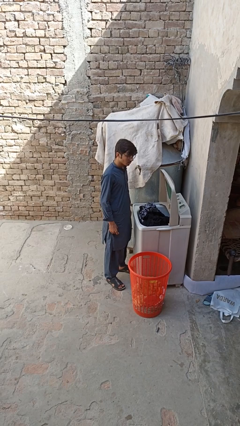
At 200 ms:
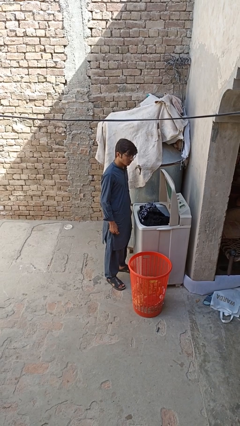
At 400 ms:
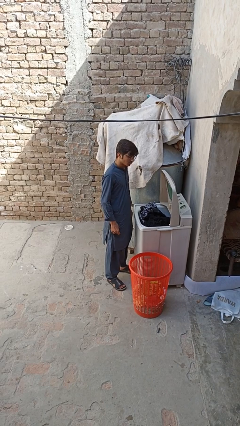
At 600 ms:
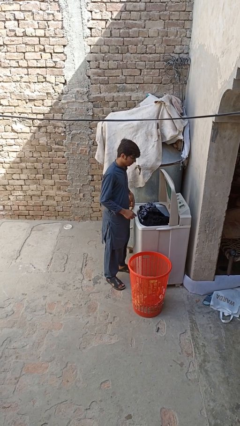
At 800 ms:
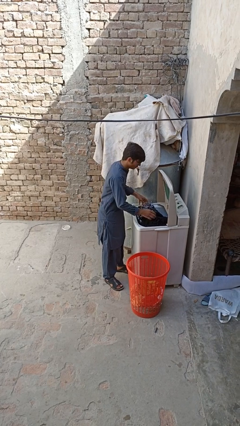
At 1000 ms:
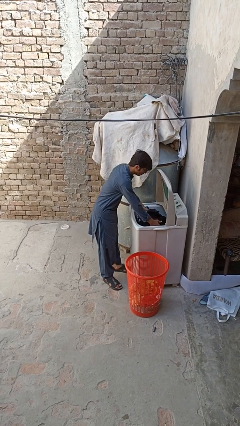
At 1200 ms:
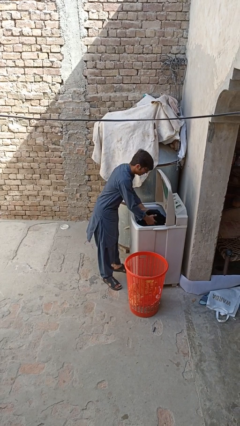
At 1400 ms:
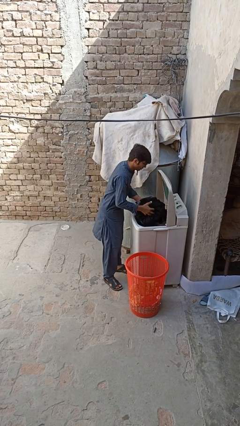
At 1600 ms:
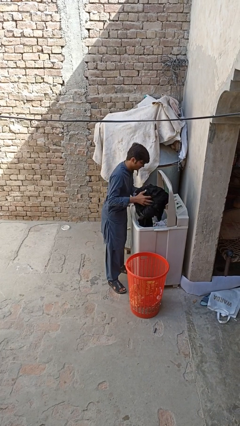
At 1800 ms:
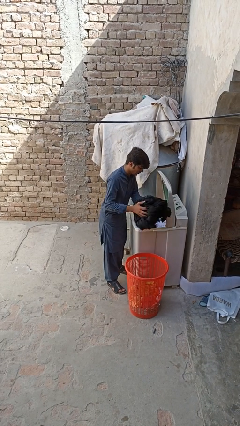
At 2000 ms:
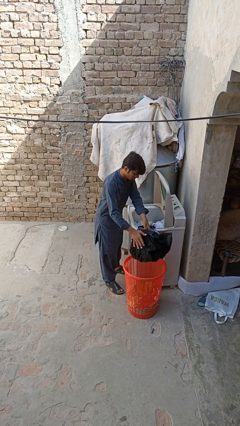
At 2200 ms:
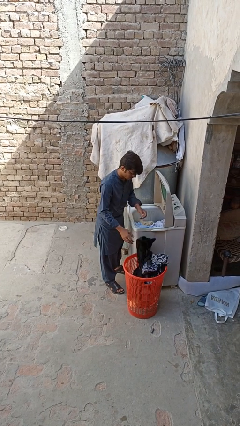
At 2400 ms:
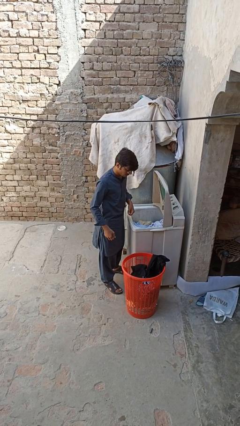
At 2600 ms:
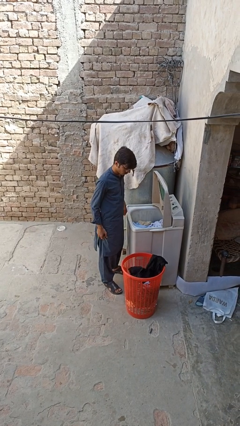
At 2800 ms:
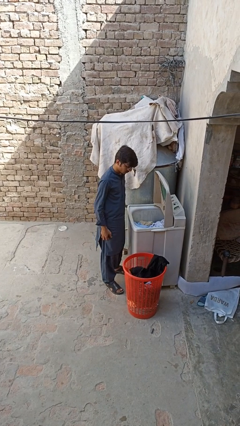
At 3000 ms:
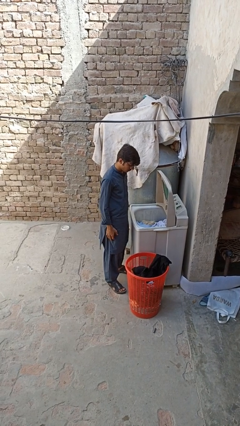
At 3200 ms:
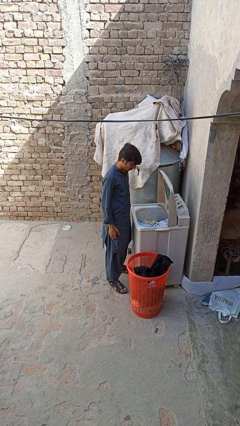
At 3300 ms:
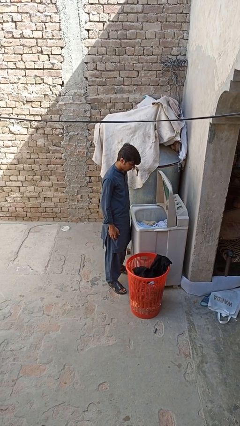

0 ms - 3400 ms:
person unloads clotheswasher

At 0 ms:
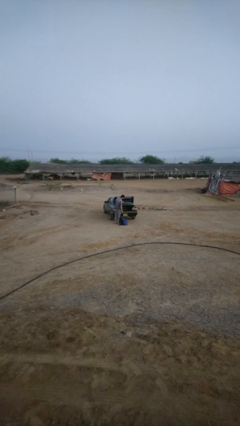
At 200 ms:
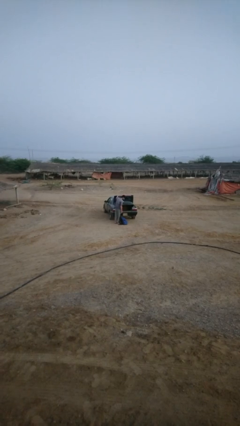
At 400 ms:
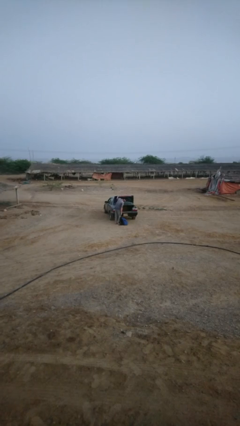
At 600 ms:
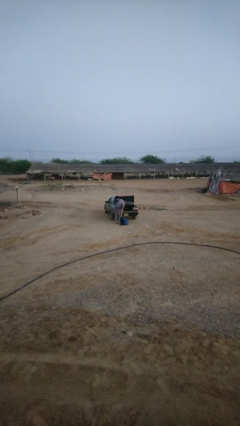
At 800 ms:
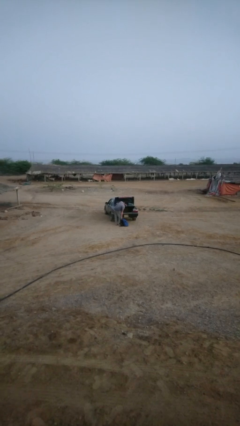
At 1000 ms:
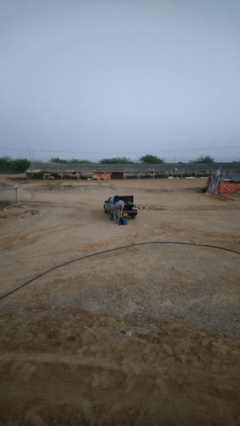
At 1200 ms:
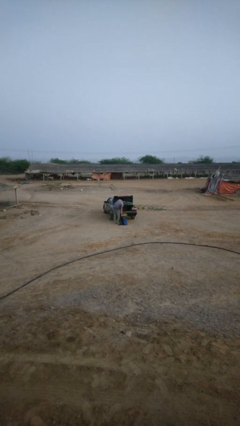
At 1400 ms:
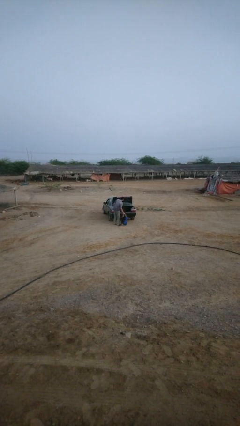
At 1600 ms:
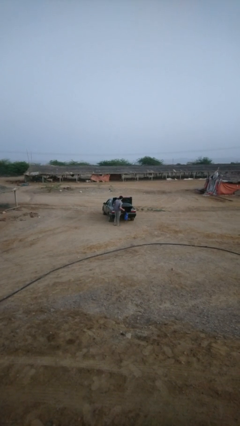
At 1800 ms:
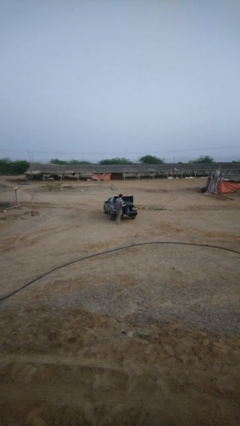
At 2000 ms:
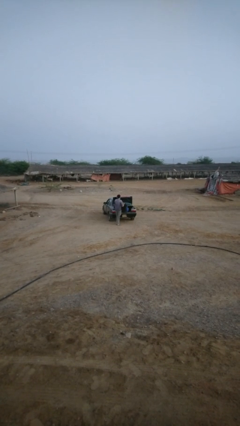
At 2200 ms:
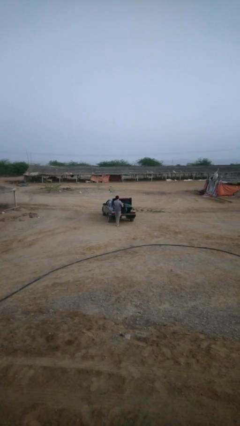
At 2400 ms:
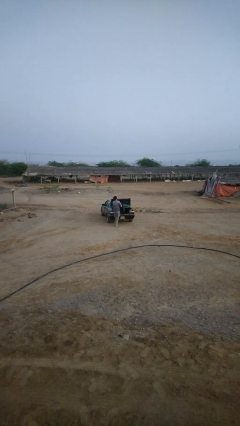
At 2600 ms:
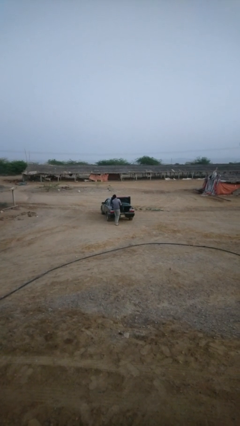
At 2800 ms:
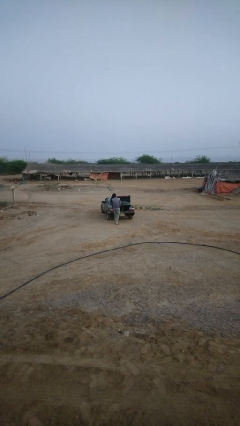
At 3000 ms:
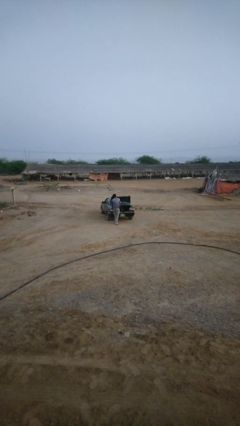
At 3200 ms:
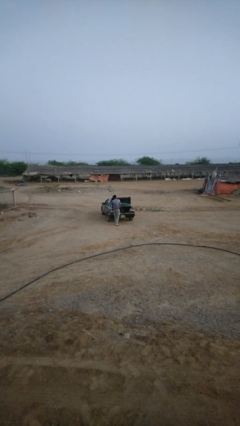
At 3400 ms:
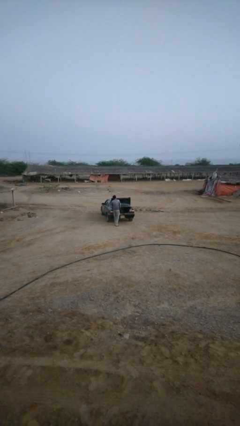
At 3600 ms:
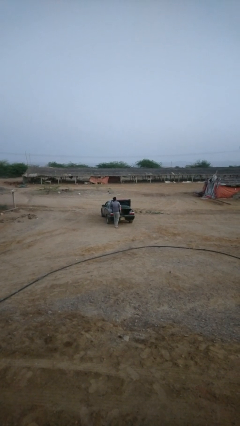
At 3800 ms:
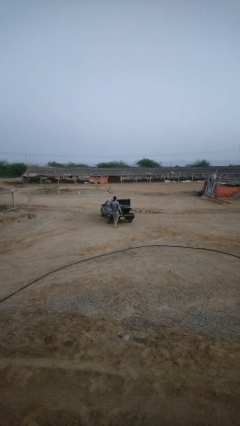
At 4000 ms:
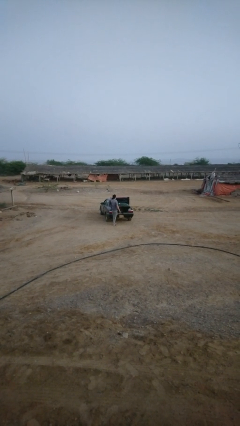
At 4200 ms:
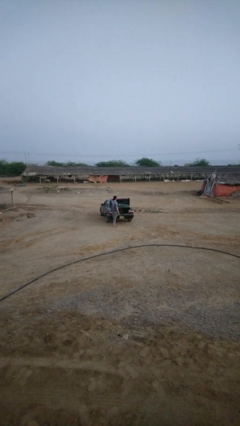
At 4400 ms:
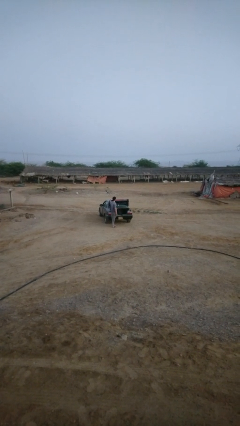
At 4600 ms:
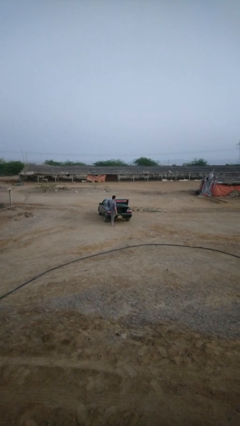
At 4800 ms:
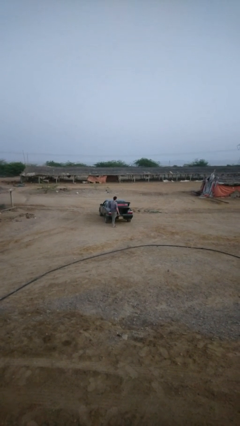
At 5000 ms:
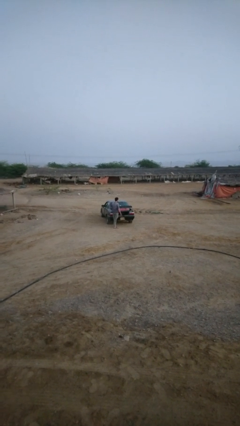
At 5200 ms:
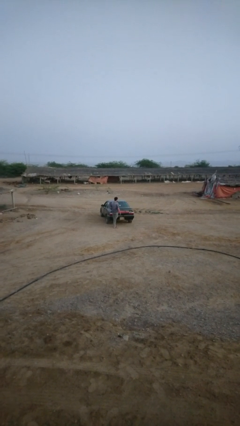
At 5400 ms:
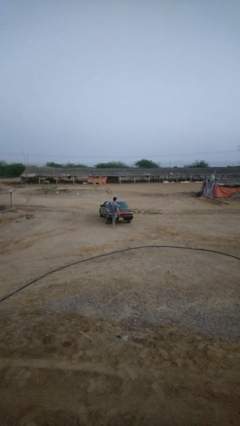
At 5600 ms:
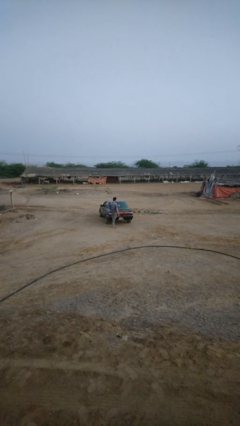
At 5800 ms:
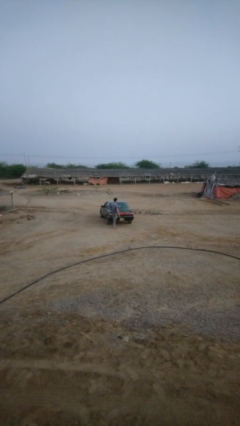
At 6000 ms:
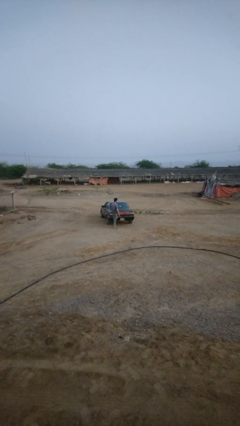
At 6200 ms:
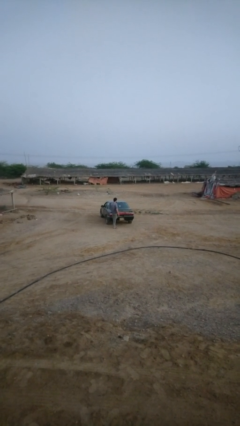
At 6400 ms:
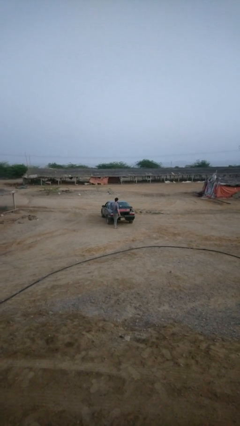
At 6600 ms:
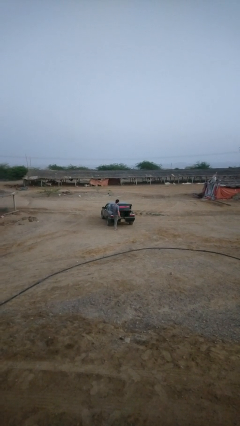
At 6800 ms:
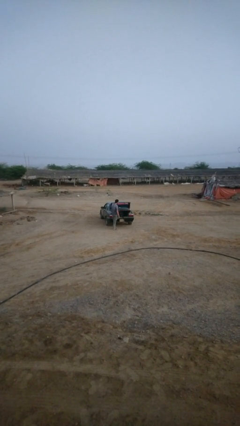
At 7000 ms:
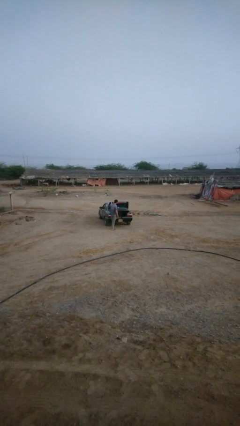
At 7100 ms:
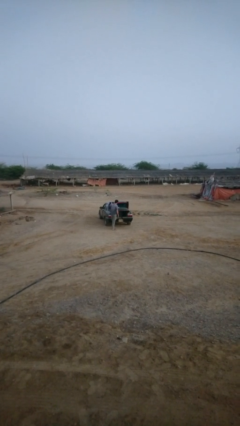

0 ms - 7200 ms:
person loads car

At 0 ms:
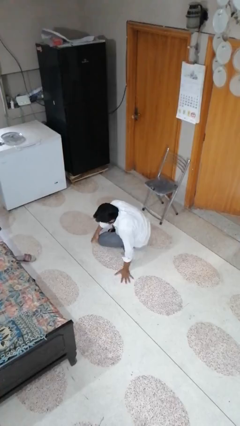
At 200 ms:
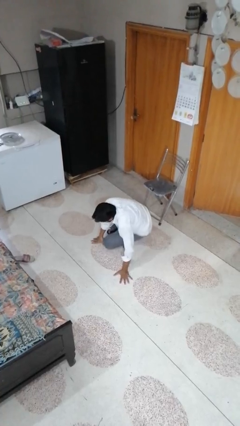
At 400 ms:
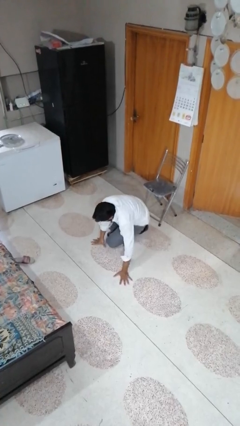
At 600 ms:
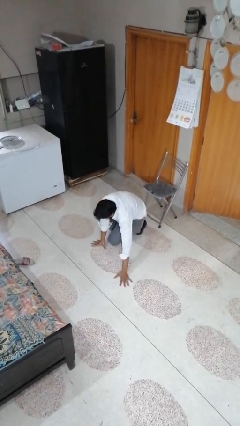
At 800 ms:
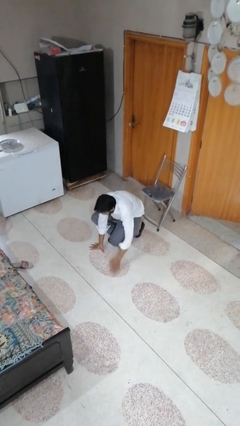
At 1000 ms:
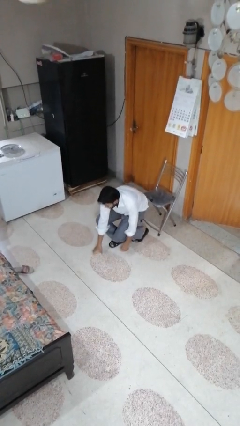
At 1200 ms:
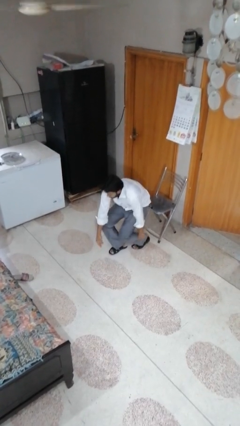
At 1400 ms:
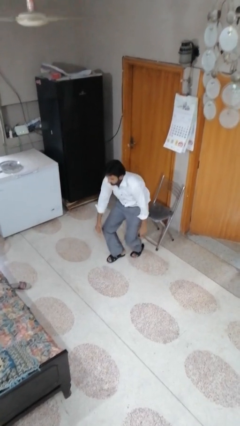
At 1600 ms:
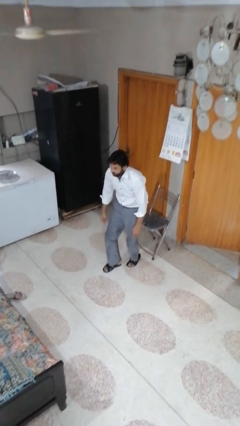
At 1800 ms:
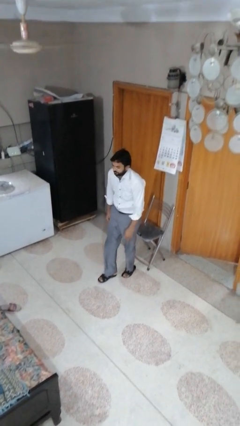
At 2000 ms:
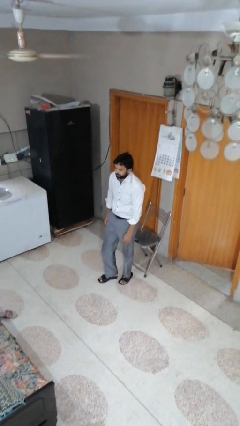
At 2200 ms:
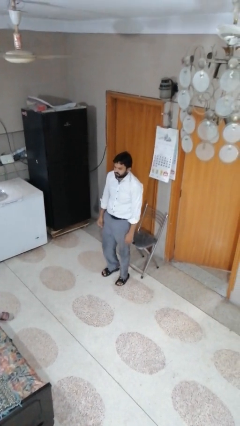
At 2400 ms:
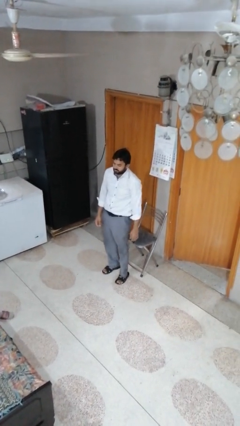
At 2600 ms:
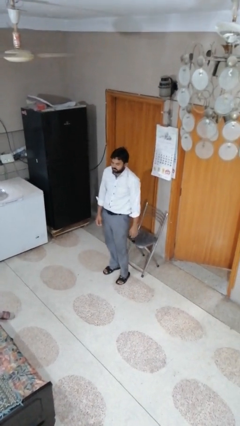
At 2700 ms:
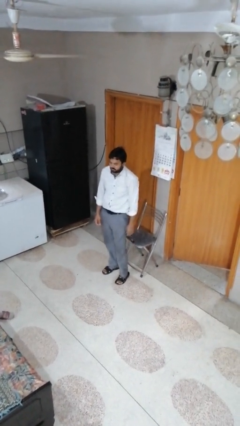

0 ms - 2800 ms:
person stands up from floor

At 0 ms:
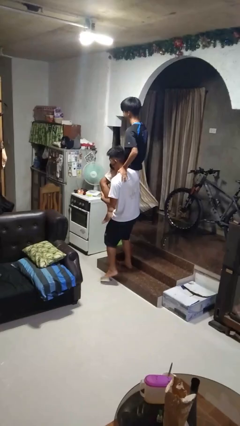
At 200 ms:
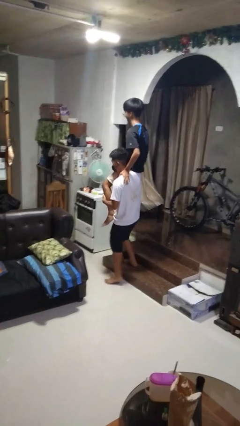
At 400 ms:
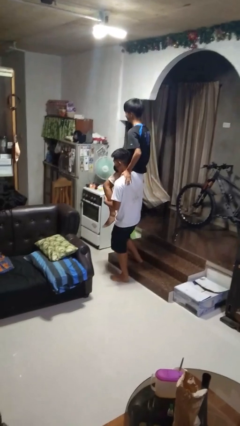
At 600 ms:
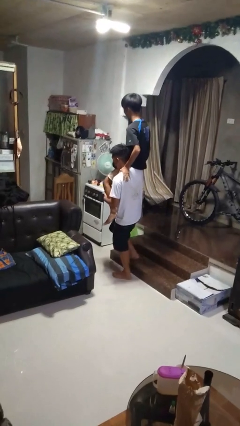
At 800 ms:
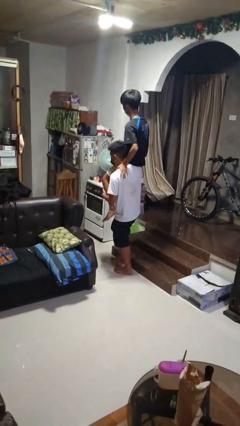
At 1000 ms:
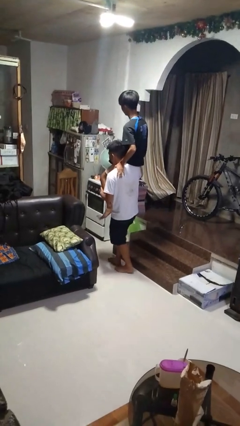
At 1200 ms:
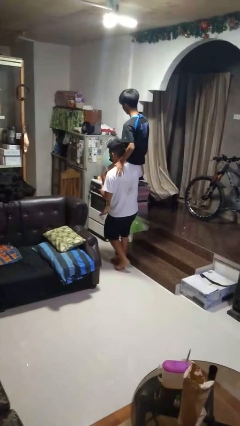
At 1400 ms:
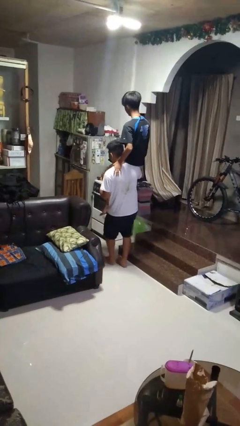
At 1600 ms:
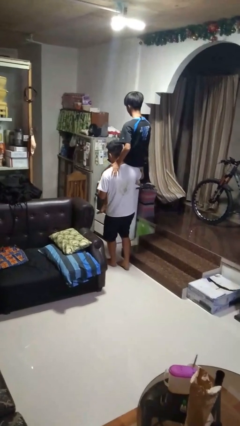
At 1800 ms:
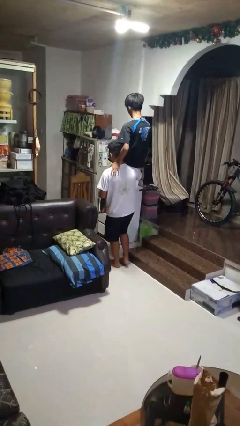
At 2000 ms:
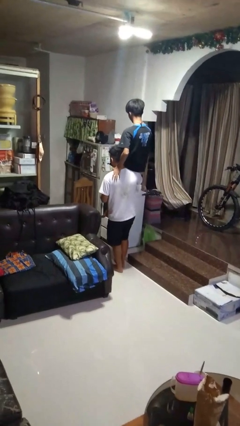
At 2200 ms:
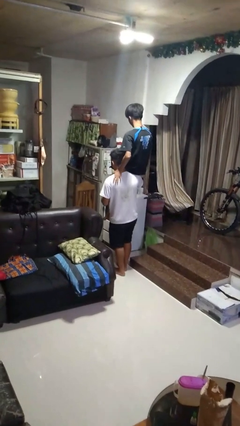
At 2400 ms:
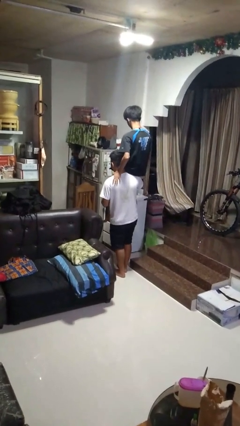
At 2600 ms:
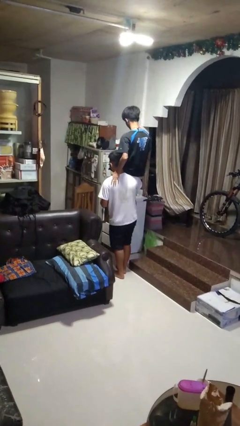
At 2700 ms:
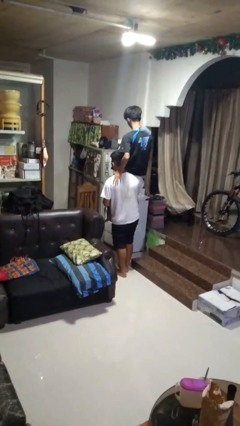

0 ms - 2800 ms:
person carries person on back

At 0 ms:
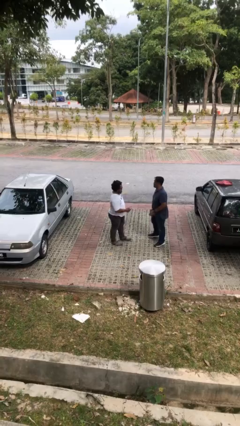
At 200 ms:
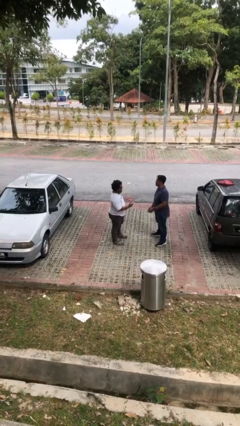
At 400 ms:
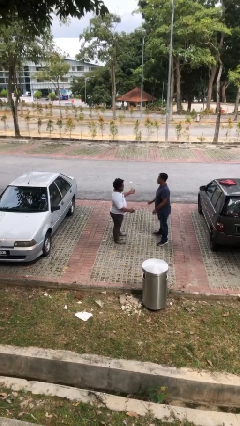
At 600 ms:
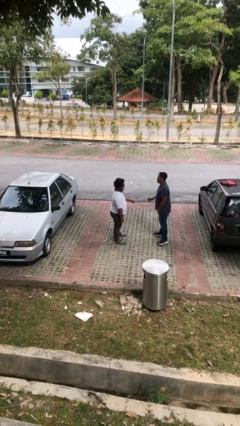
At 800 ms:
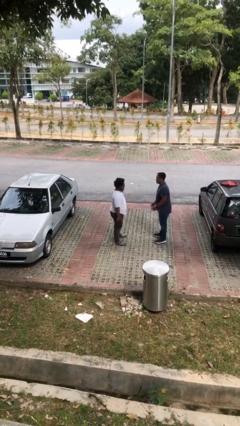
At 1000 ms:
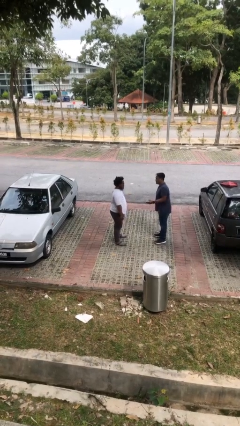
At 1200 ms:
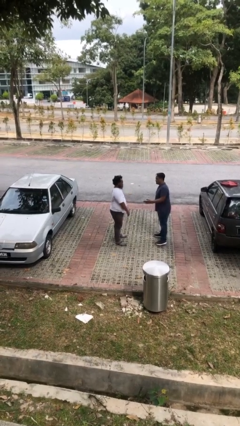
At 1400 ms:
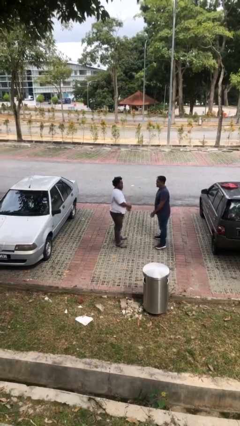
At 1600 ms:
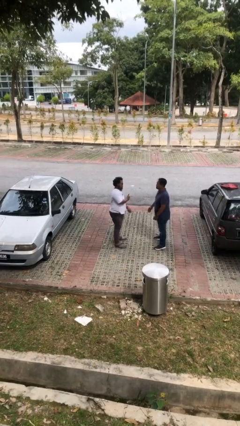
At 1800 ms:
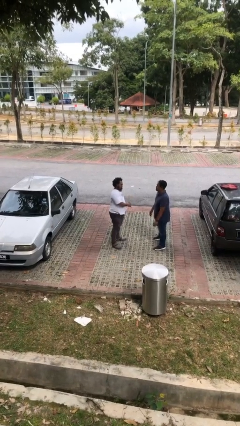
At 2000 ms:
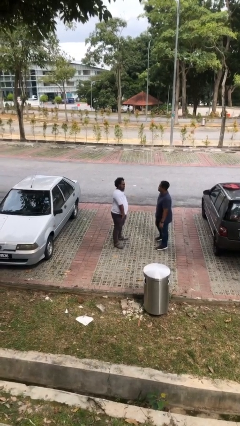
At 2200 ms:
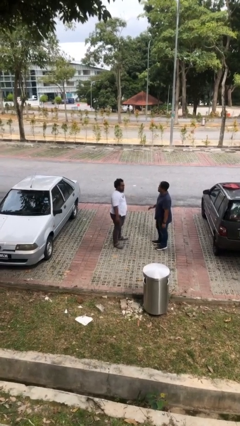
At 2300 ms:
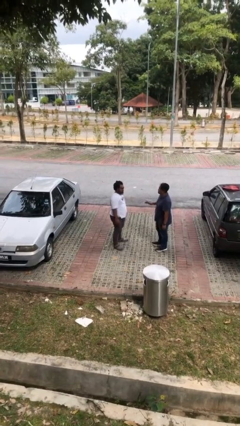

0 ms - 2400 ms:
person talks to person
